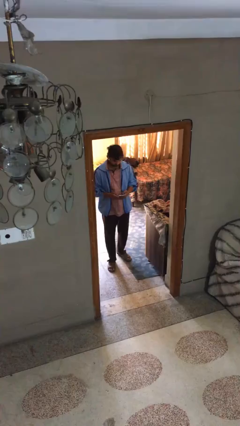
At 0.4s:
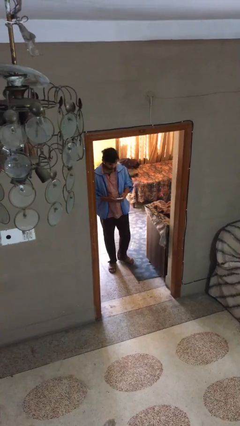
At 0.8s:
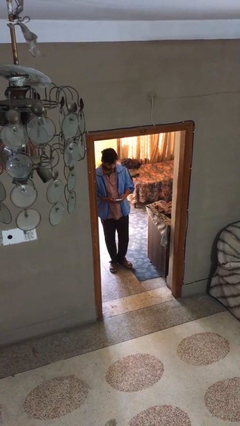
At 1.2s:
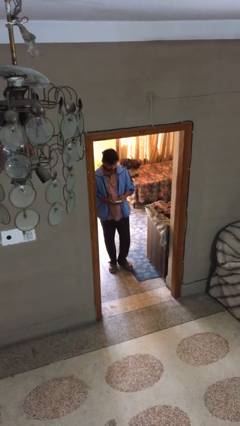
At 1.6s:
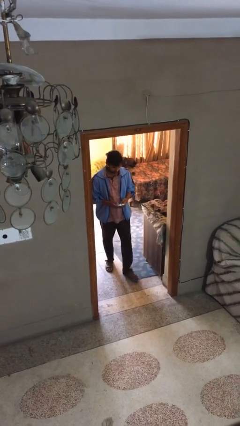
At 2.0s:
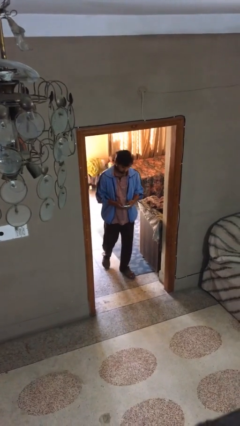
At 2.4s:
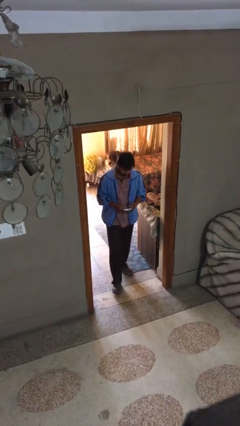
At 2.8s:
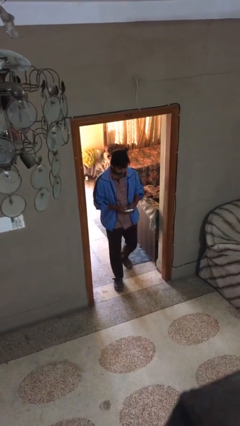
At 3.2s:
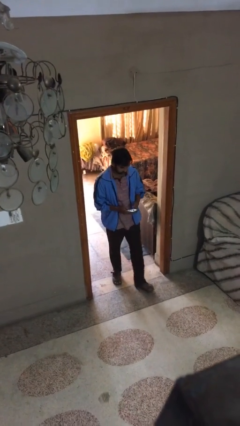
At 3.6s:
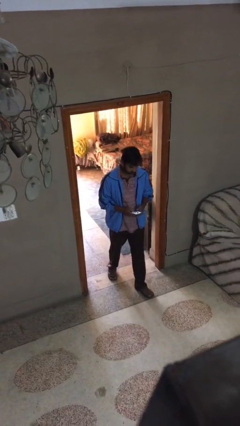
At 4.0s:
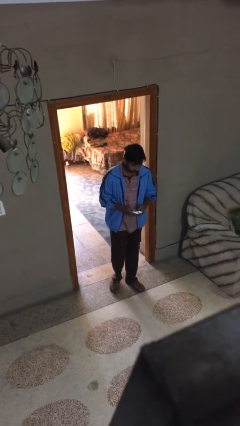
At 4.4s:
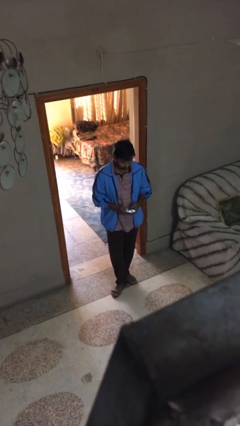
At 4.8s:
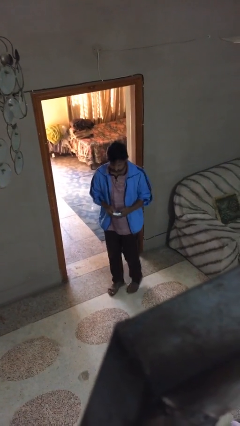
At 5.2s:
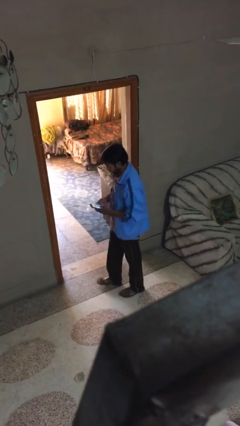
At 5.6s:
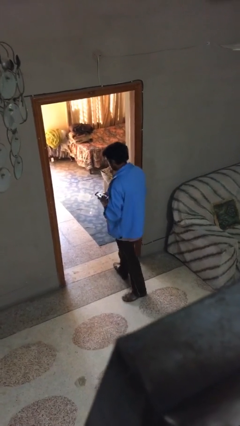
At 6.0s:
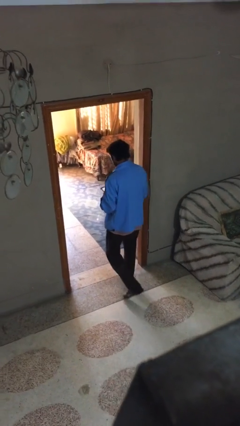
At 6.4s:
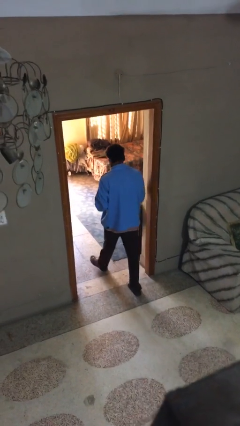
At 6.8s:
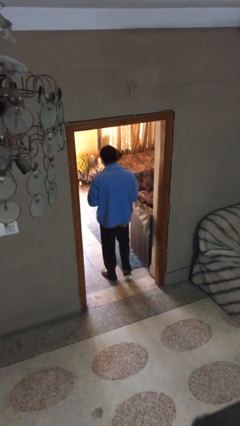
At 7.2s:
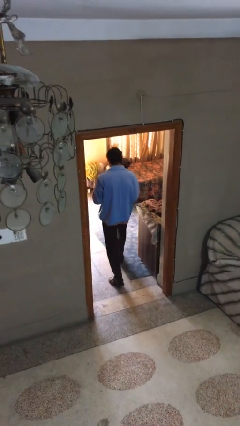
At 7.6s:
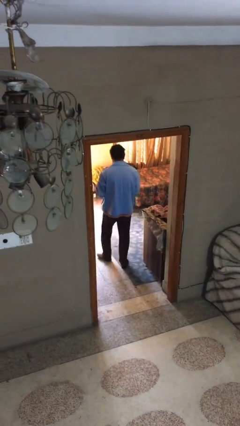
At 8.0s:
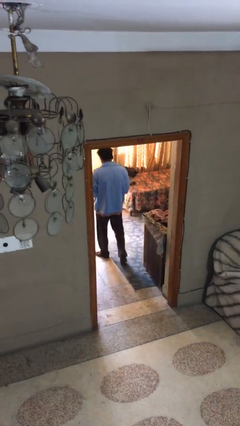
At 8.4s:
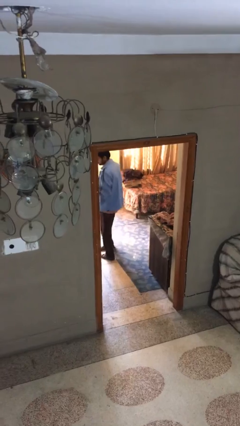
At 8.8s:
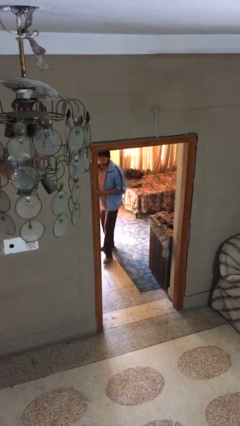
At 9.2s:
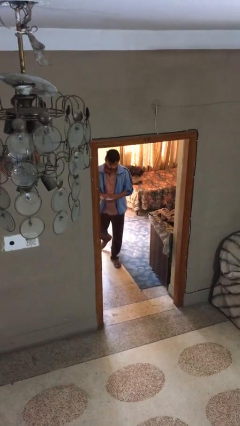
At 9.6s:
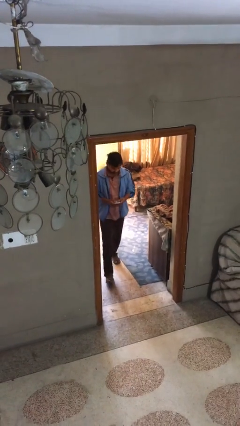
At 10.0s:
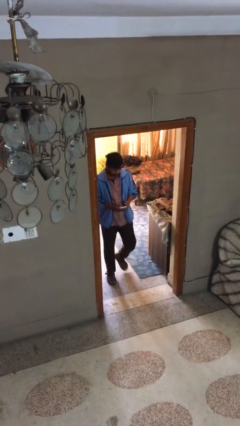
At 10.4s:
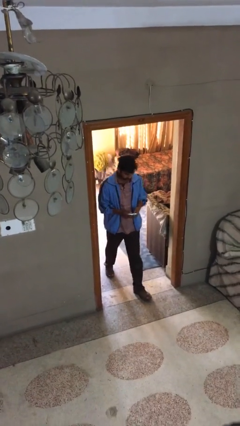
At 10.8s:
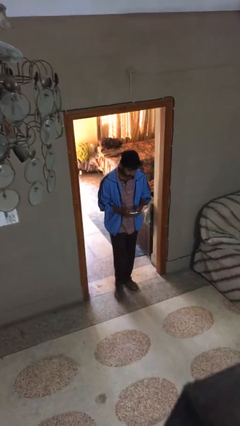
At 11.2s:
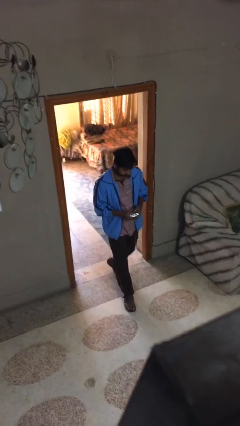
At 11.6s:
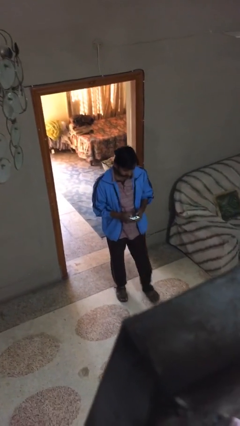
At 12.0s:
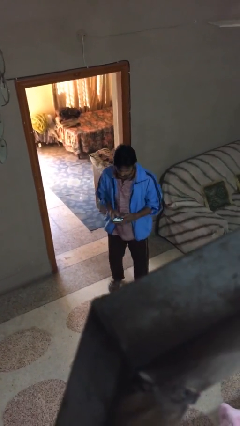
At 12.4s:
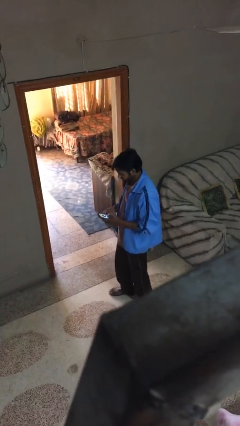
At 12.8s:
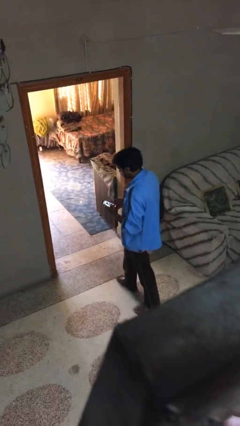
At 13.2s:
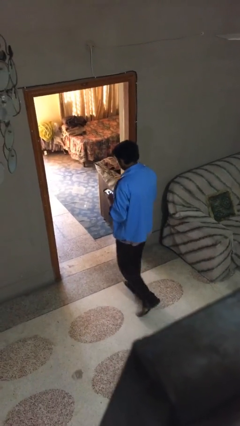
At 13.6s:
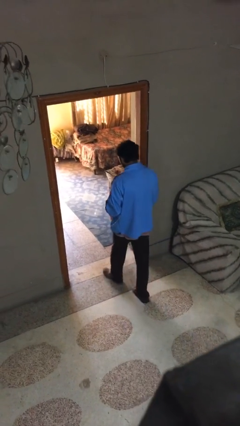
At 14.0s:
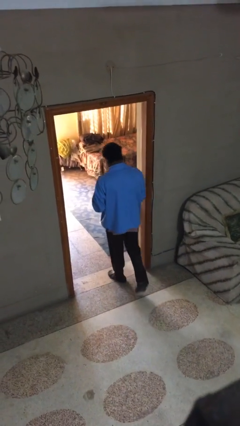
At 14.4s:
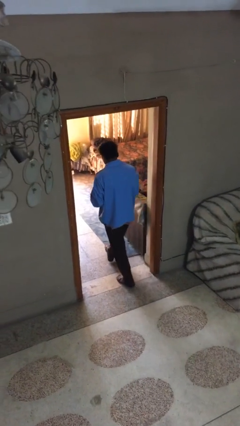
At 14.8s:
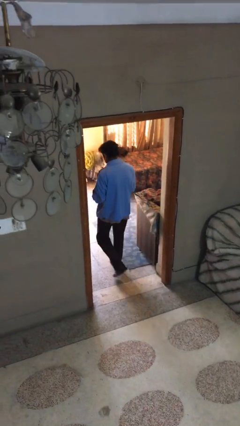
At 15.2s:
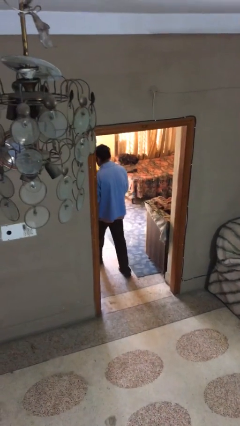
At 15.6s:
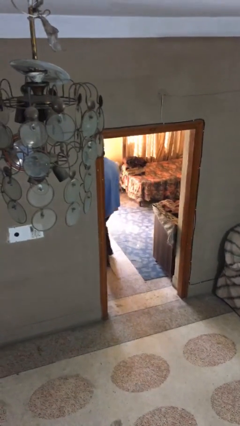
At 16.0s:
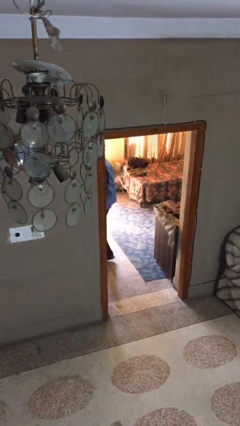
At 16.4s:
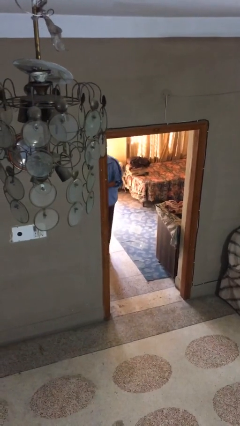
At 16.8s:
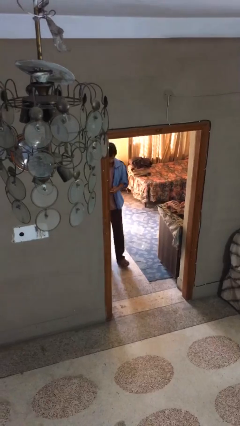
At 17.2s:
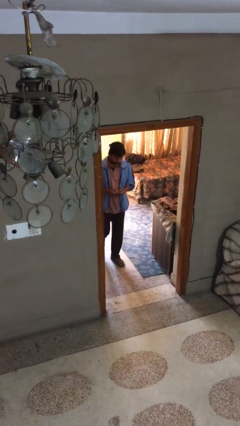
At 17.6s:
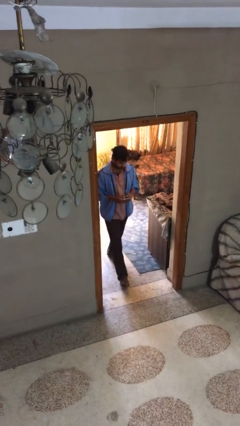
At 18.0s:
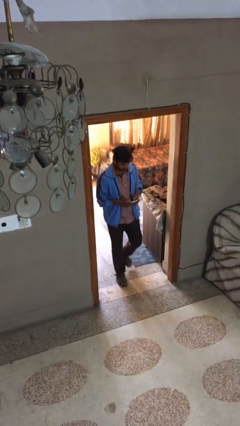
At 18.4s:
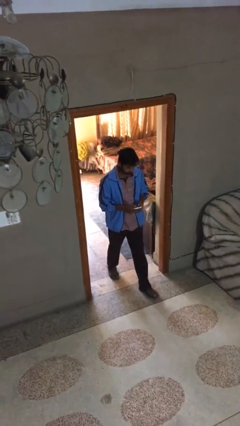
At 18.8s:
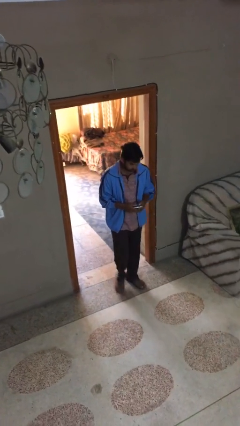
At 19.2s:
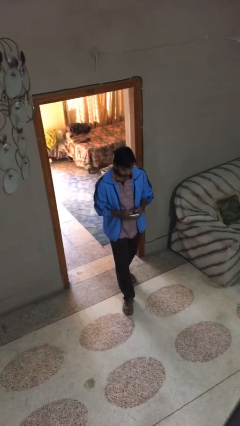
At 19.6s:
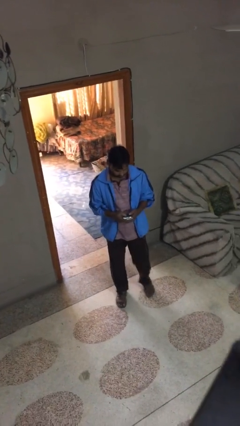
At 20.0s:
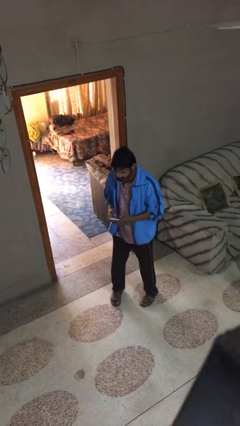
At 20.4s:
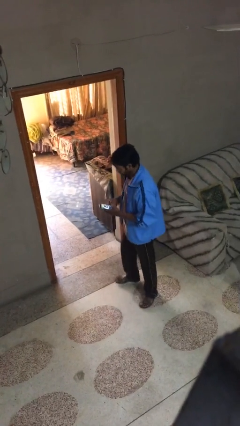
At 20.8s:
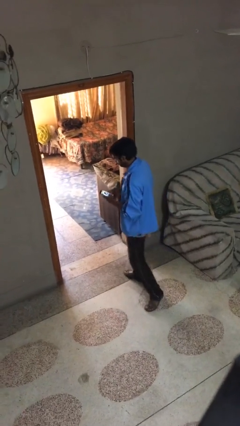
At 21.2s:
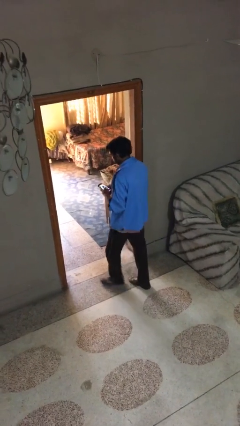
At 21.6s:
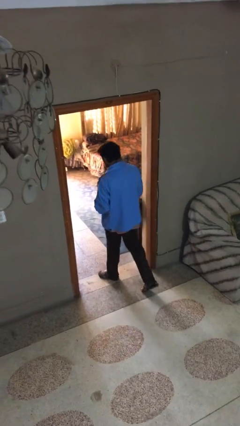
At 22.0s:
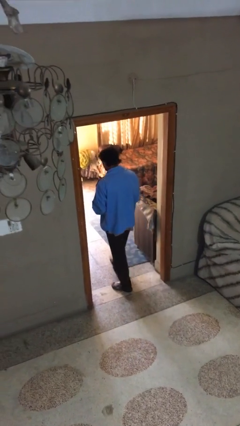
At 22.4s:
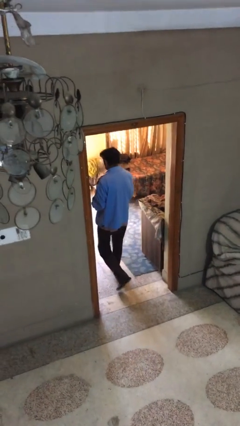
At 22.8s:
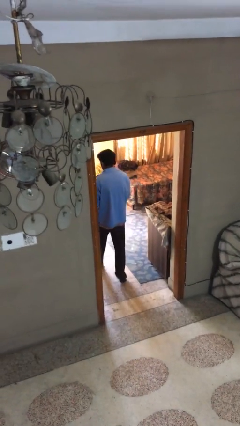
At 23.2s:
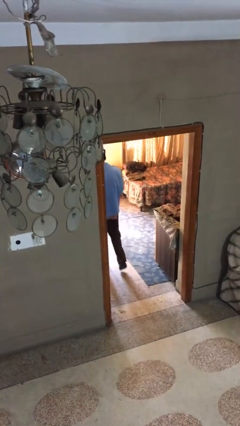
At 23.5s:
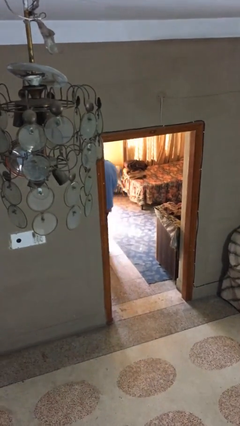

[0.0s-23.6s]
person texts on phone

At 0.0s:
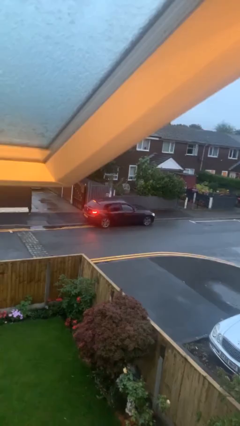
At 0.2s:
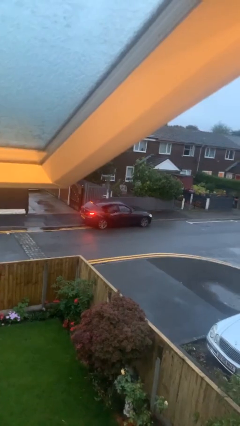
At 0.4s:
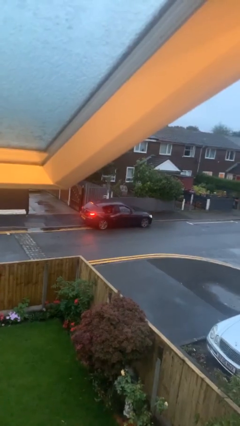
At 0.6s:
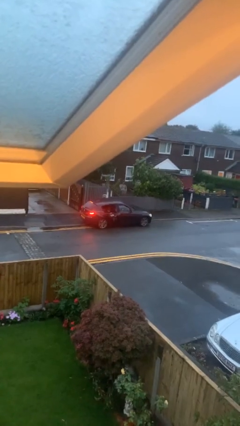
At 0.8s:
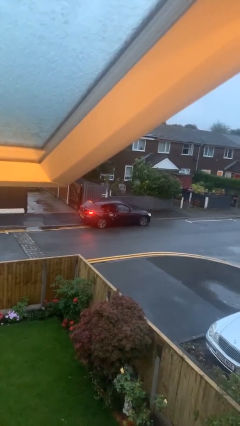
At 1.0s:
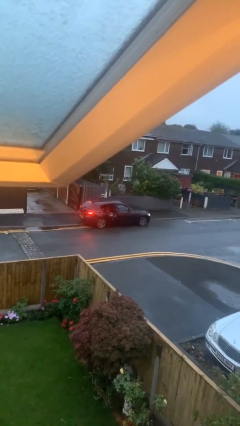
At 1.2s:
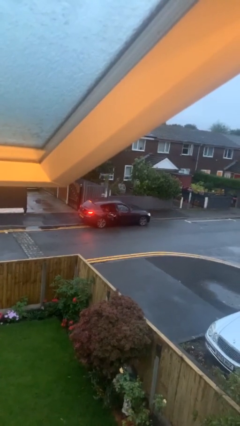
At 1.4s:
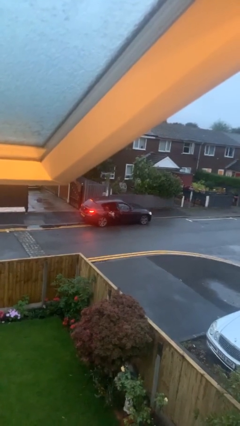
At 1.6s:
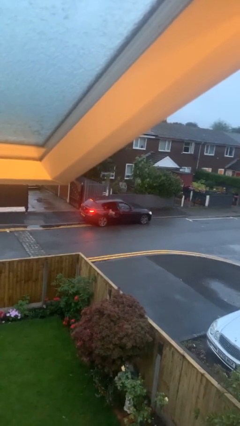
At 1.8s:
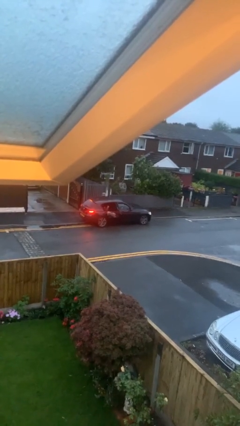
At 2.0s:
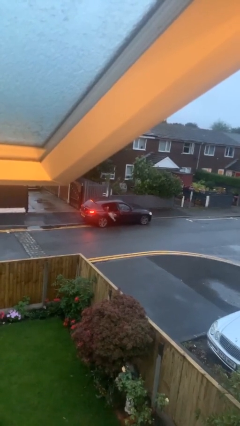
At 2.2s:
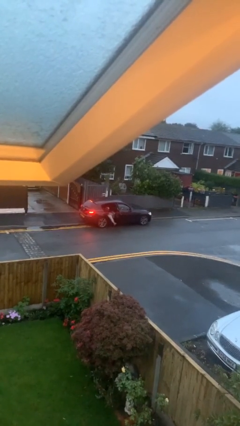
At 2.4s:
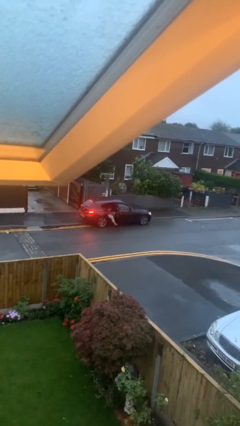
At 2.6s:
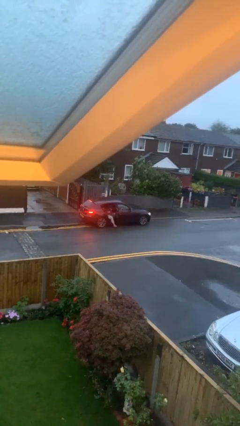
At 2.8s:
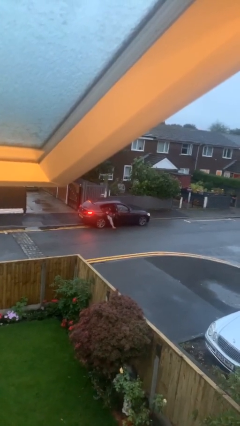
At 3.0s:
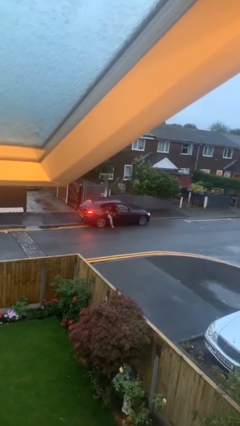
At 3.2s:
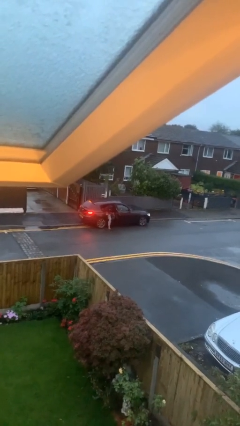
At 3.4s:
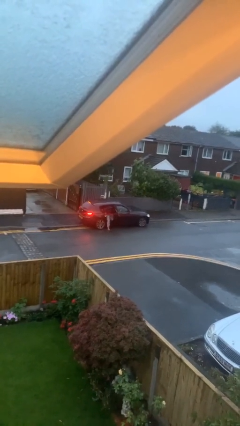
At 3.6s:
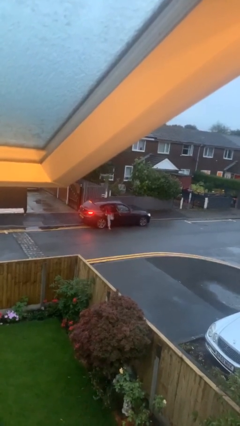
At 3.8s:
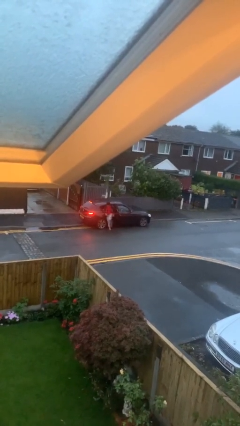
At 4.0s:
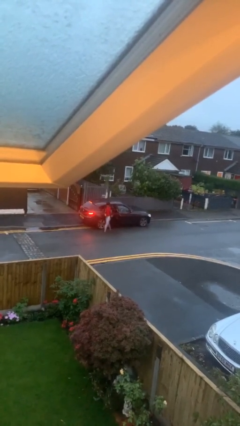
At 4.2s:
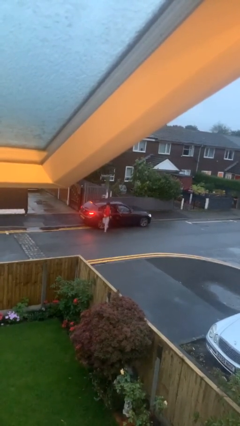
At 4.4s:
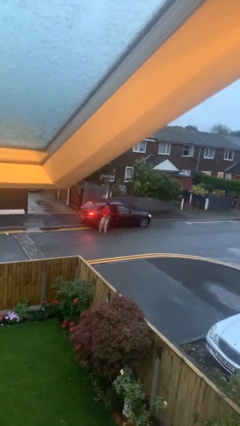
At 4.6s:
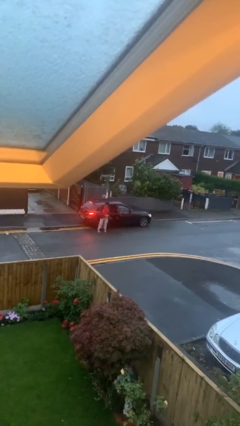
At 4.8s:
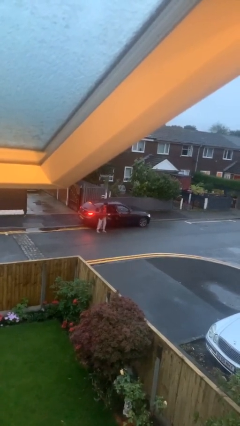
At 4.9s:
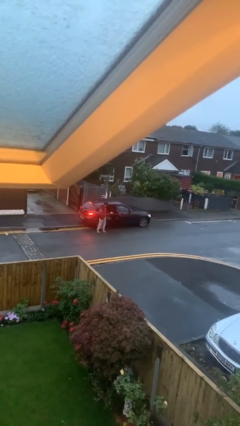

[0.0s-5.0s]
car drops off person

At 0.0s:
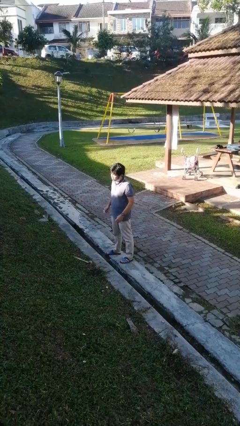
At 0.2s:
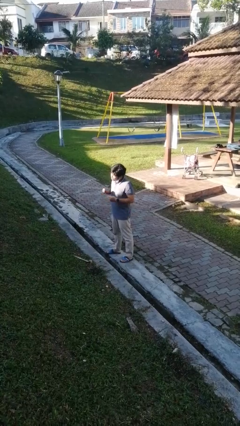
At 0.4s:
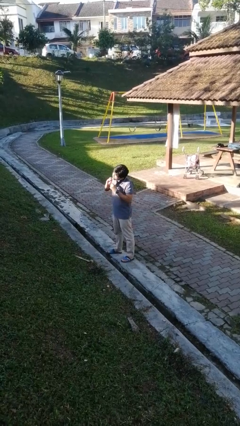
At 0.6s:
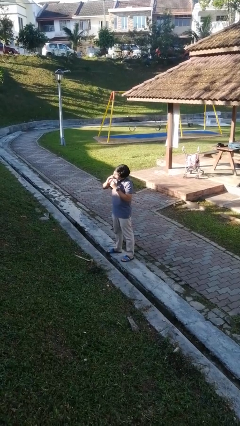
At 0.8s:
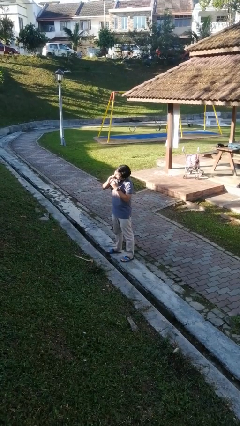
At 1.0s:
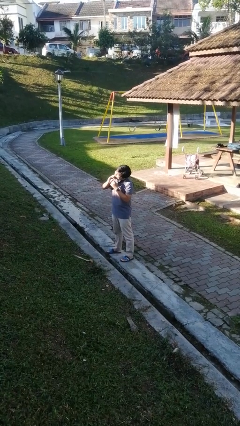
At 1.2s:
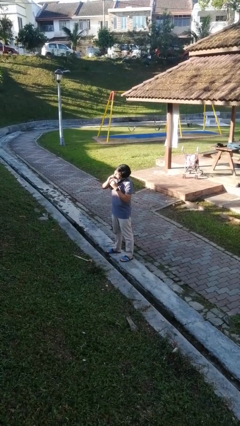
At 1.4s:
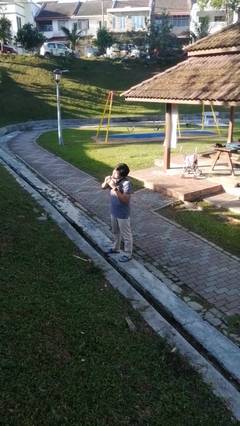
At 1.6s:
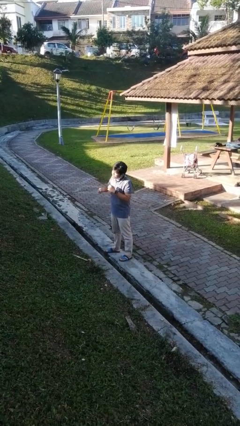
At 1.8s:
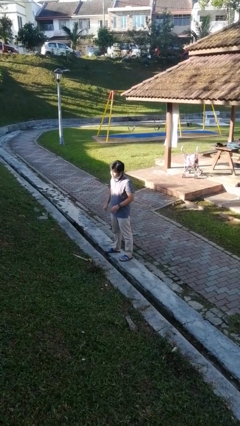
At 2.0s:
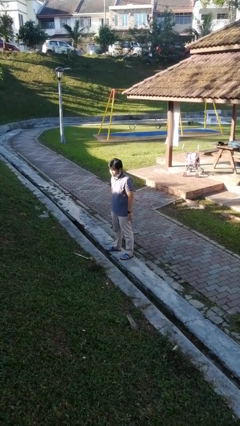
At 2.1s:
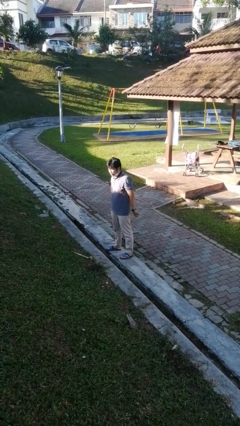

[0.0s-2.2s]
person flosses
